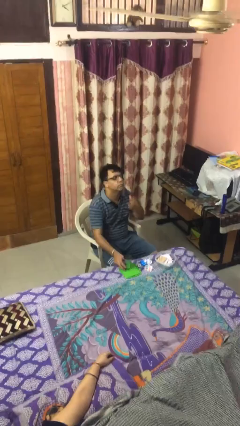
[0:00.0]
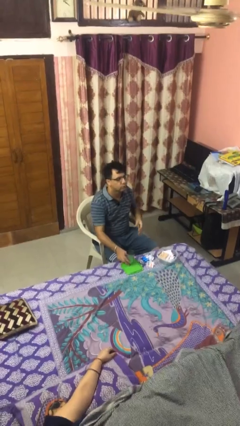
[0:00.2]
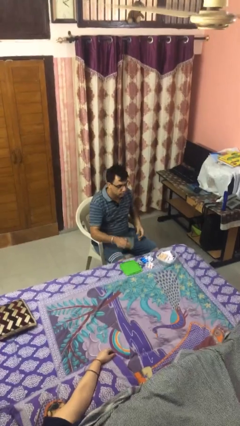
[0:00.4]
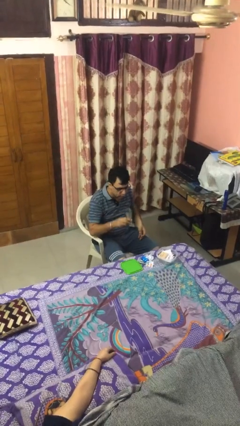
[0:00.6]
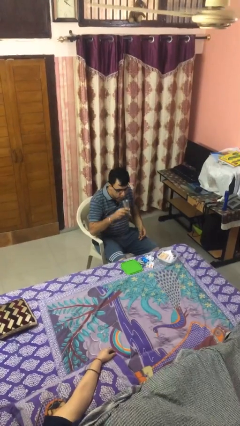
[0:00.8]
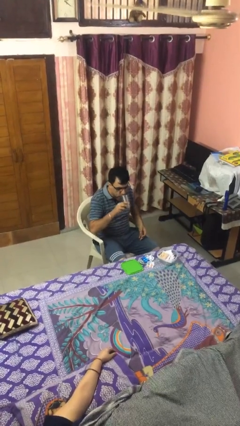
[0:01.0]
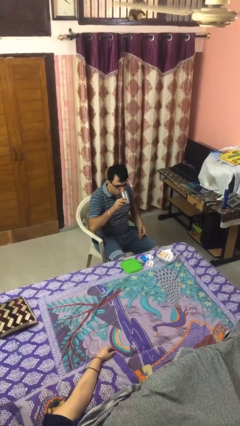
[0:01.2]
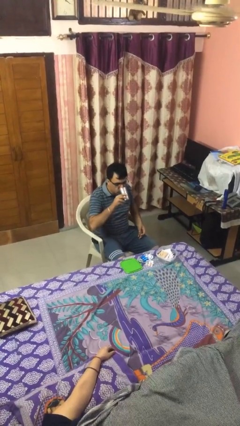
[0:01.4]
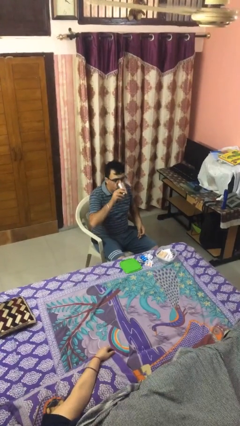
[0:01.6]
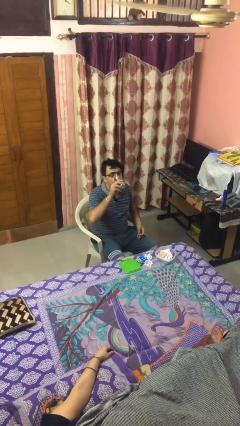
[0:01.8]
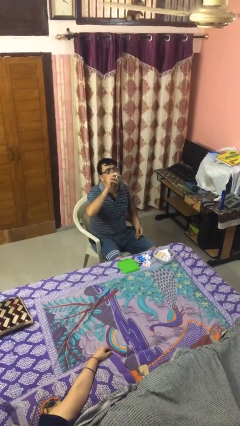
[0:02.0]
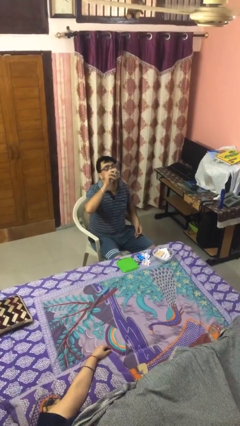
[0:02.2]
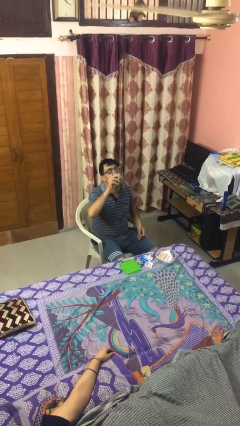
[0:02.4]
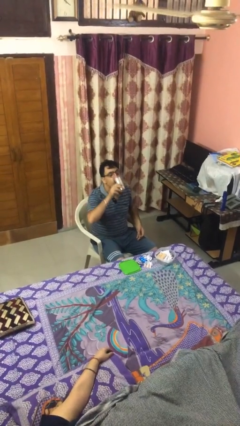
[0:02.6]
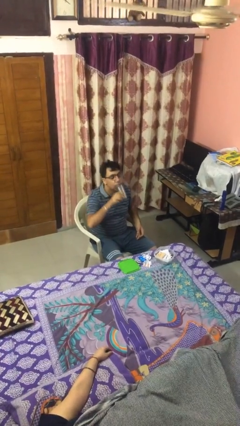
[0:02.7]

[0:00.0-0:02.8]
person drinks from cup

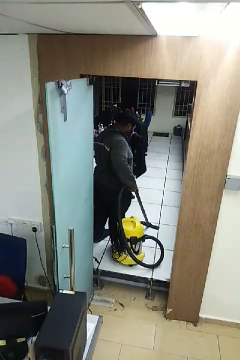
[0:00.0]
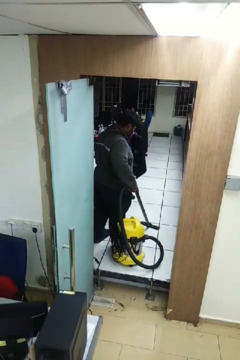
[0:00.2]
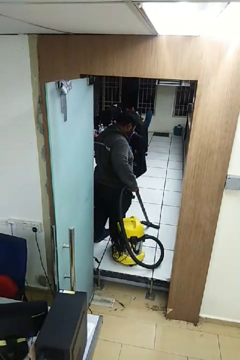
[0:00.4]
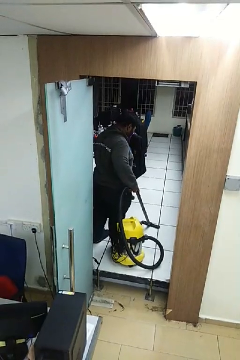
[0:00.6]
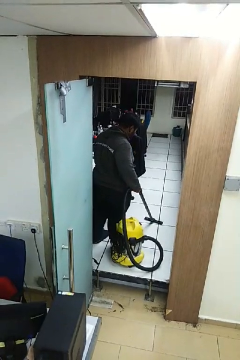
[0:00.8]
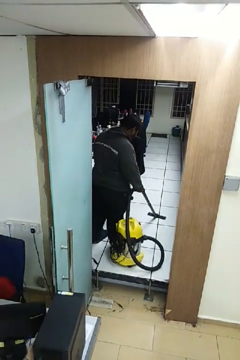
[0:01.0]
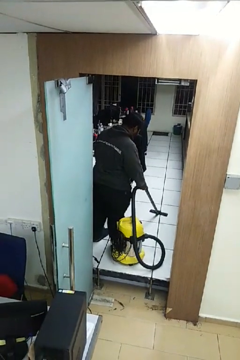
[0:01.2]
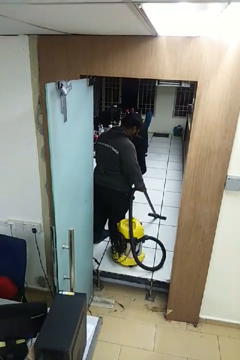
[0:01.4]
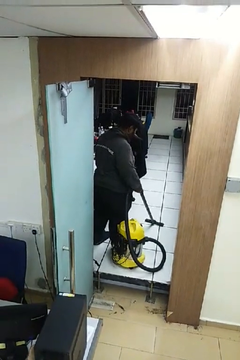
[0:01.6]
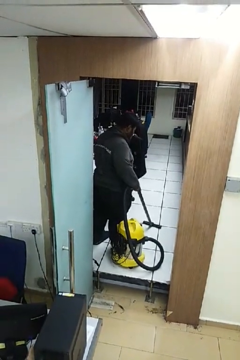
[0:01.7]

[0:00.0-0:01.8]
person vacuums carpet

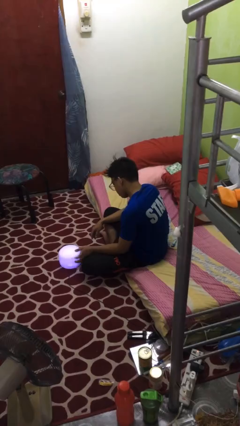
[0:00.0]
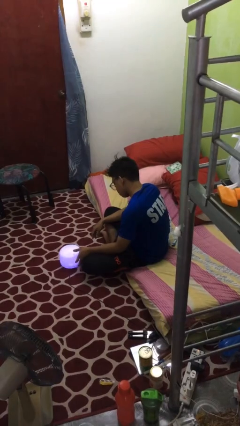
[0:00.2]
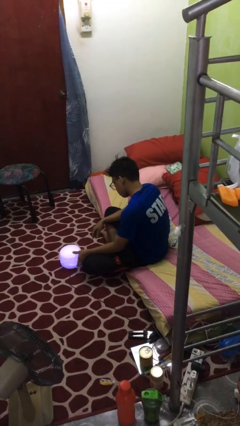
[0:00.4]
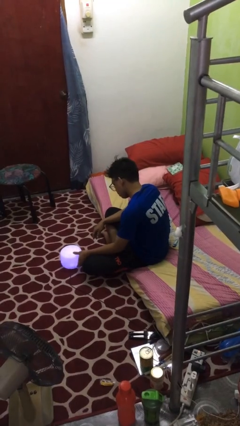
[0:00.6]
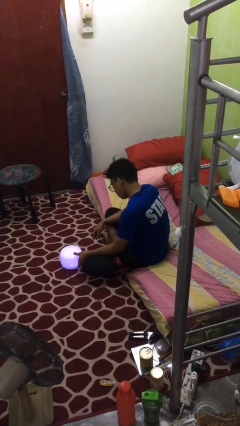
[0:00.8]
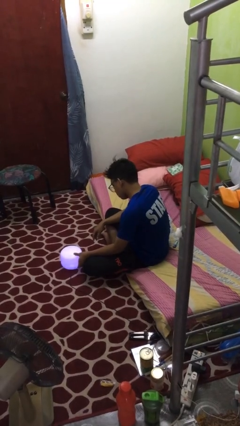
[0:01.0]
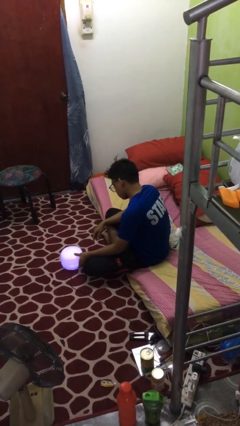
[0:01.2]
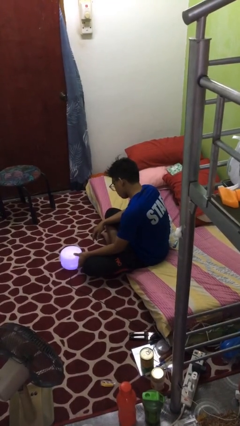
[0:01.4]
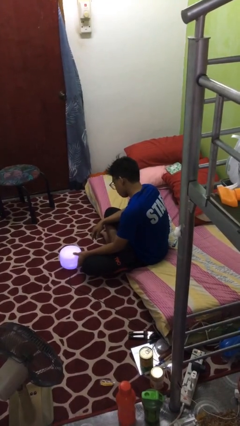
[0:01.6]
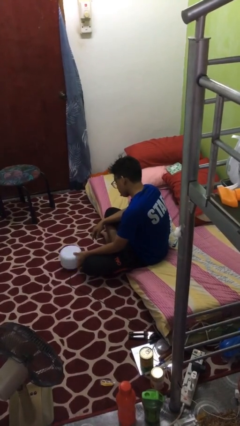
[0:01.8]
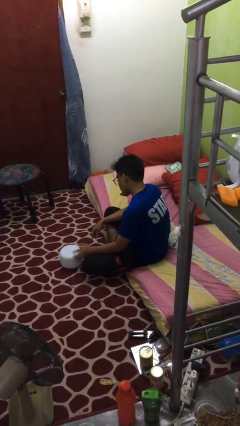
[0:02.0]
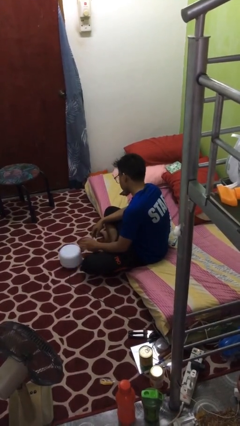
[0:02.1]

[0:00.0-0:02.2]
person turns off lamp

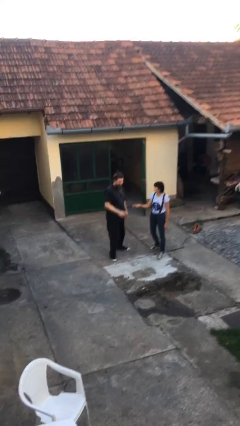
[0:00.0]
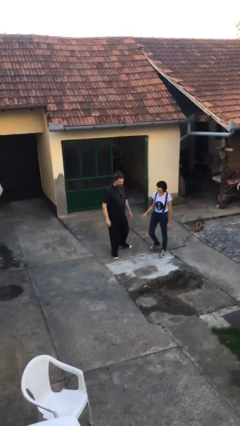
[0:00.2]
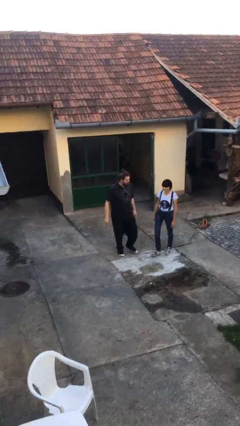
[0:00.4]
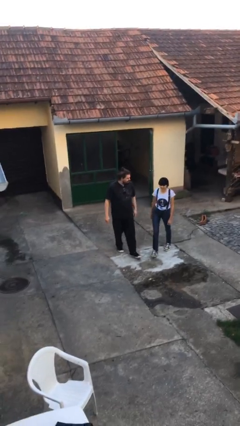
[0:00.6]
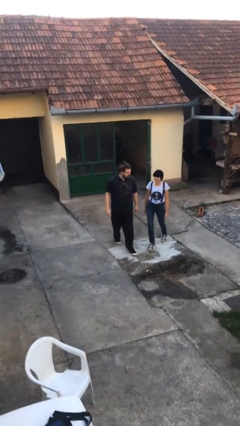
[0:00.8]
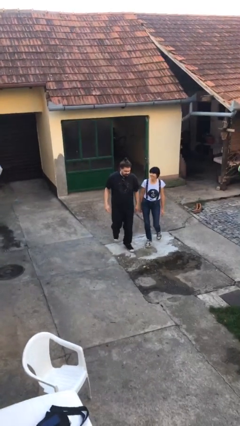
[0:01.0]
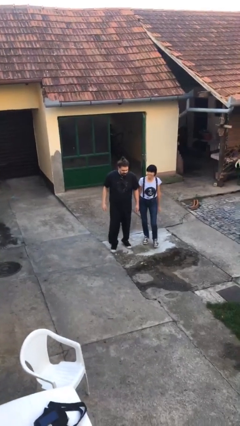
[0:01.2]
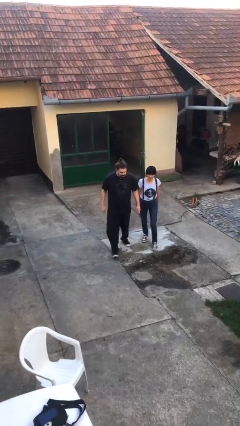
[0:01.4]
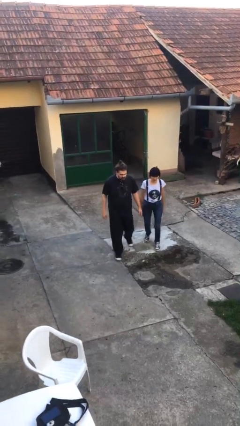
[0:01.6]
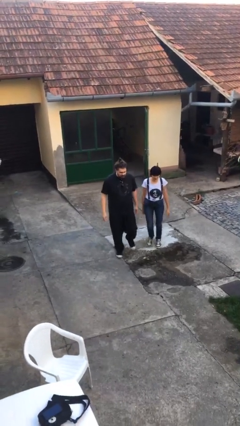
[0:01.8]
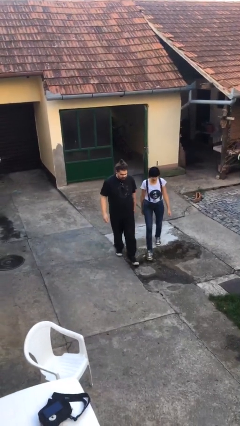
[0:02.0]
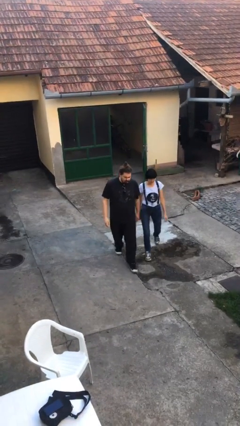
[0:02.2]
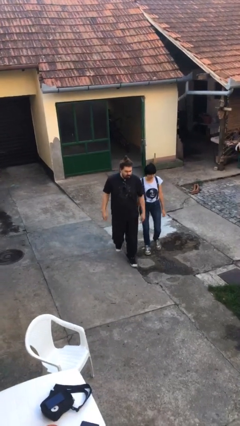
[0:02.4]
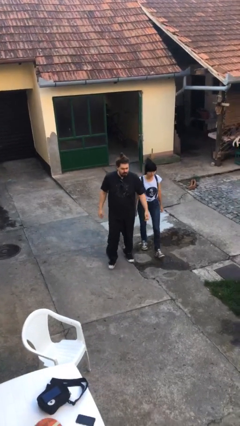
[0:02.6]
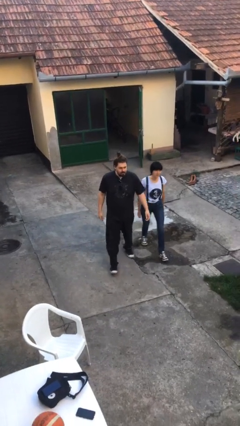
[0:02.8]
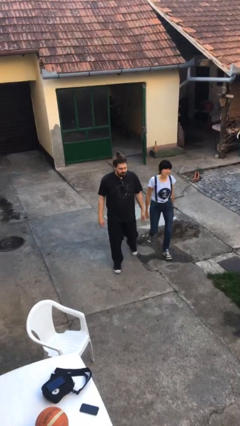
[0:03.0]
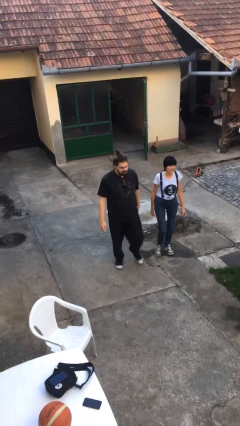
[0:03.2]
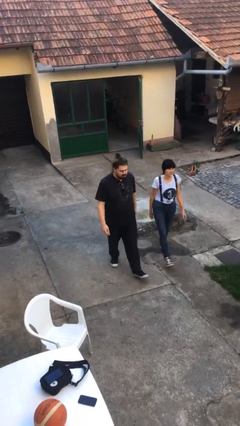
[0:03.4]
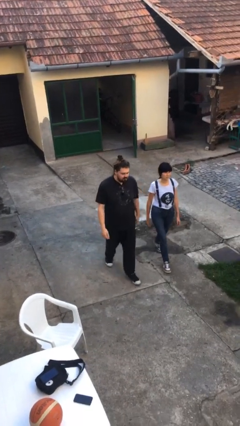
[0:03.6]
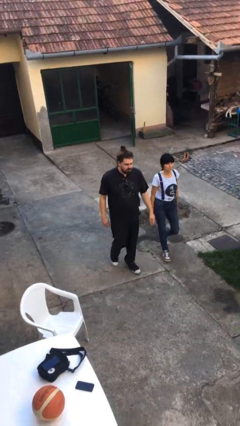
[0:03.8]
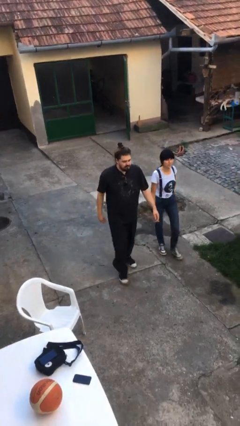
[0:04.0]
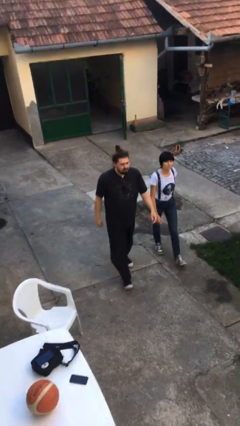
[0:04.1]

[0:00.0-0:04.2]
person talks to person

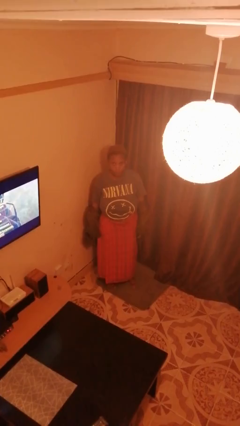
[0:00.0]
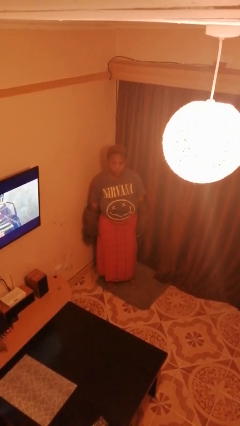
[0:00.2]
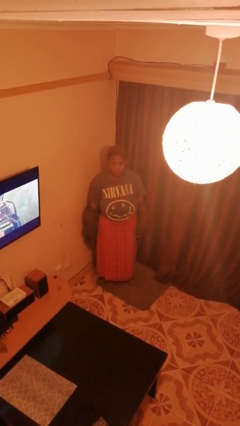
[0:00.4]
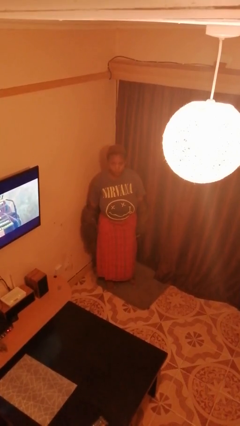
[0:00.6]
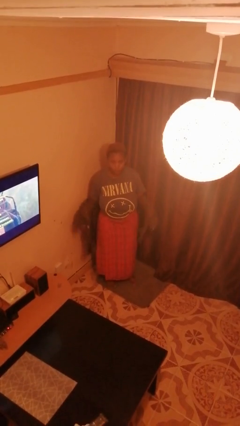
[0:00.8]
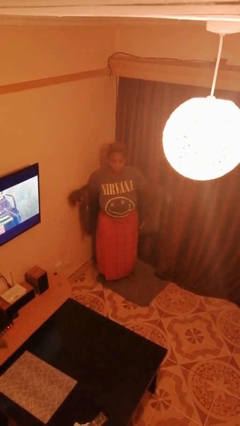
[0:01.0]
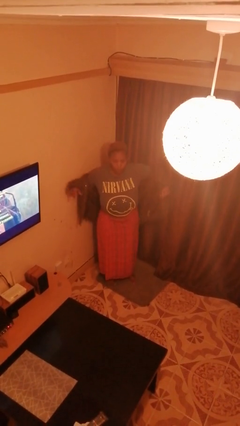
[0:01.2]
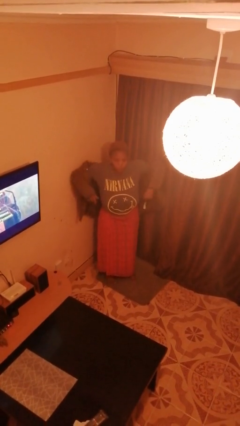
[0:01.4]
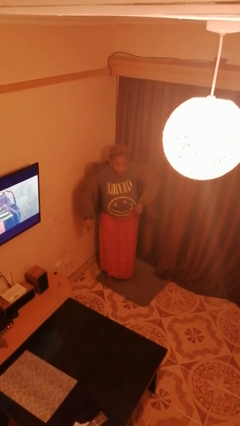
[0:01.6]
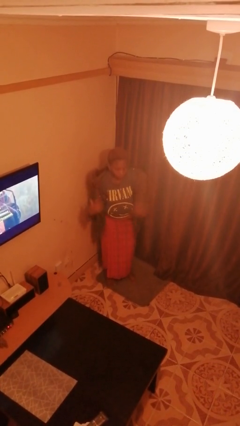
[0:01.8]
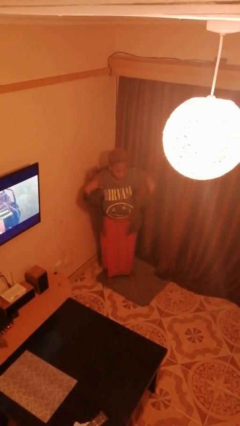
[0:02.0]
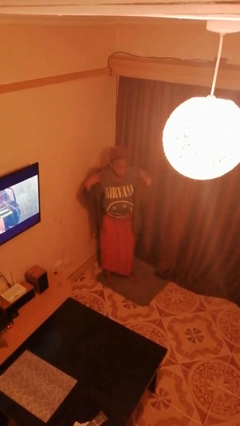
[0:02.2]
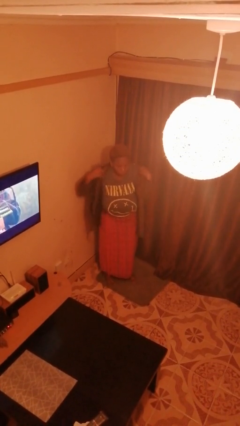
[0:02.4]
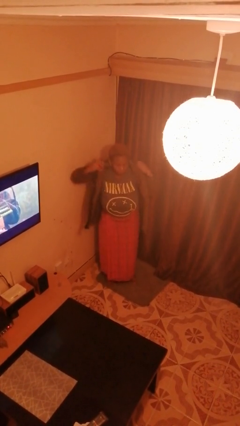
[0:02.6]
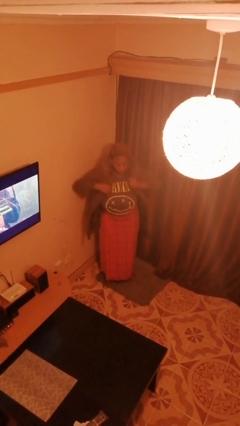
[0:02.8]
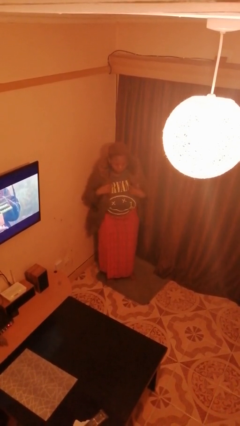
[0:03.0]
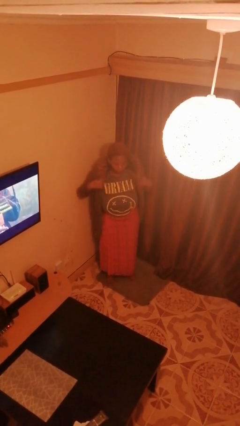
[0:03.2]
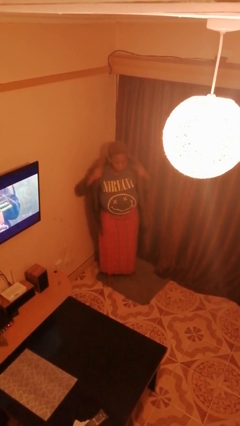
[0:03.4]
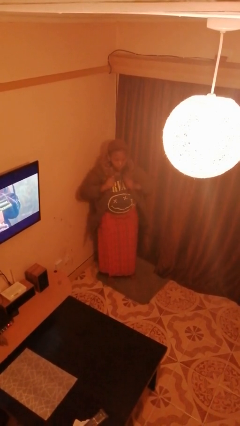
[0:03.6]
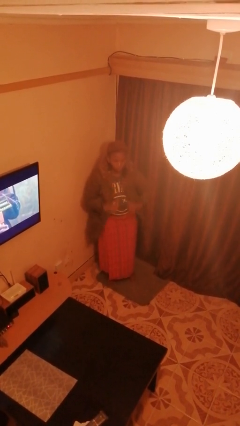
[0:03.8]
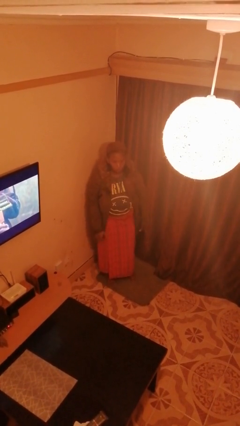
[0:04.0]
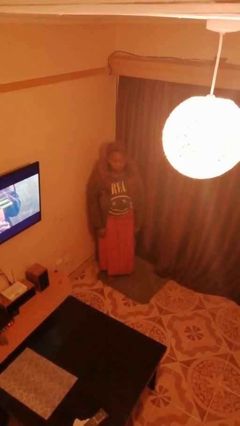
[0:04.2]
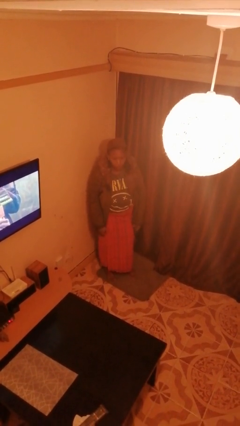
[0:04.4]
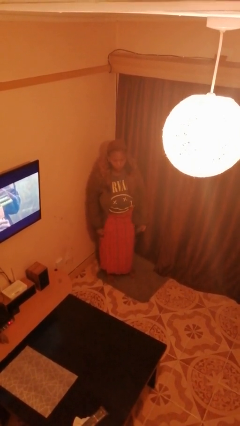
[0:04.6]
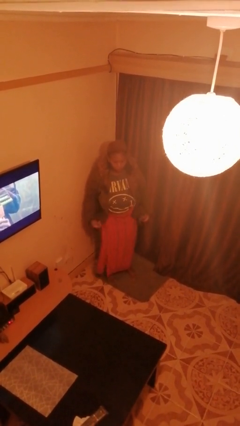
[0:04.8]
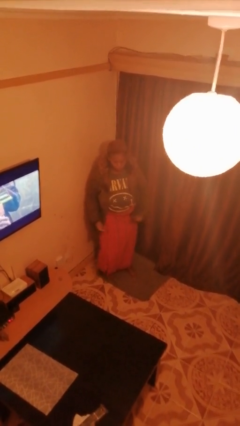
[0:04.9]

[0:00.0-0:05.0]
person puts on jacket

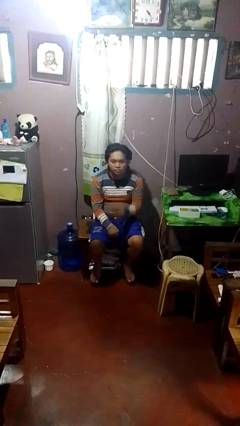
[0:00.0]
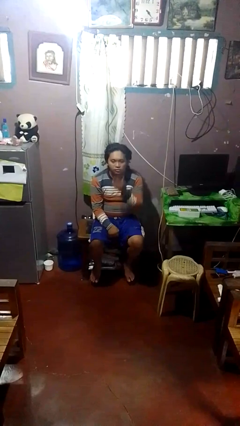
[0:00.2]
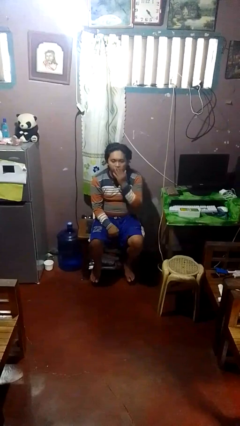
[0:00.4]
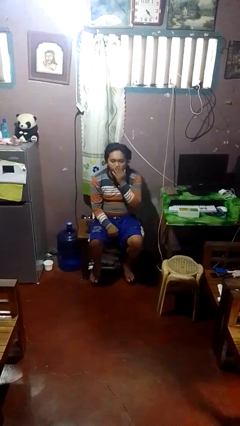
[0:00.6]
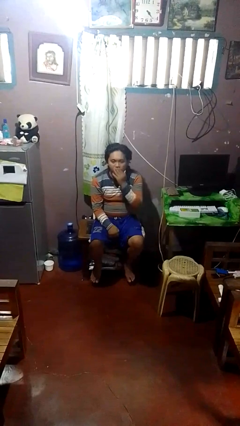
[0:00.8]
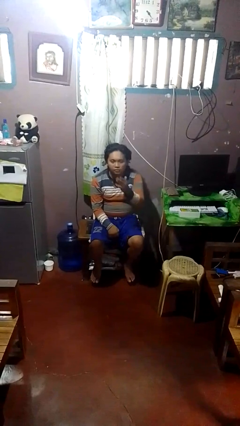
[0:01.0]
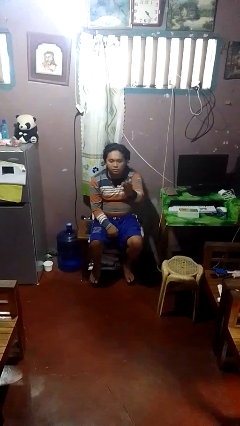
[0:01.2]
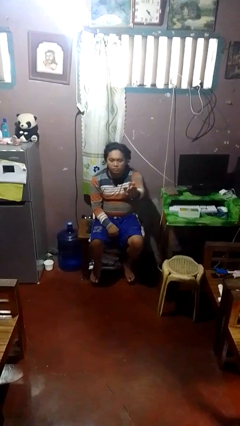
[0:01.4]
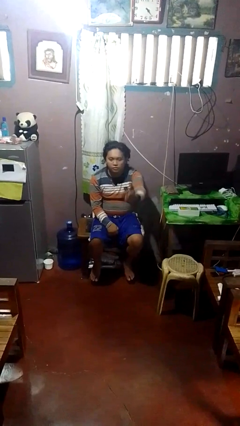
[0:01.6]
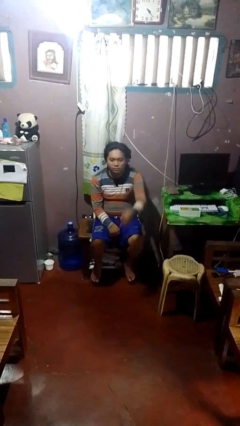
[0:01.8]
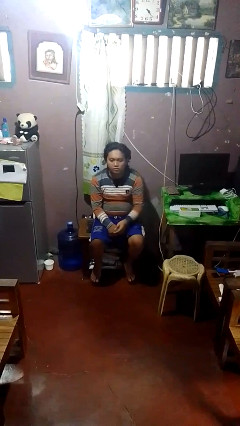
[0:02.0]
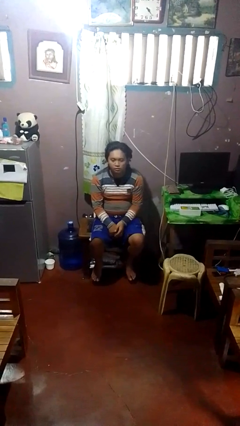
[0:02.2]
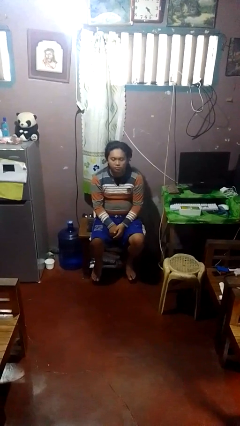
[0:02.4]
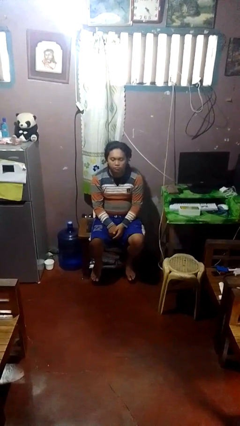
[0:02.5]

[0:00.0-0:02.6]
person gestures blow kiss
